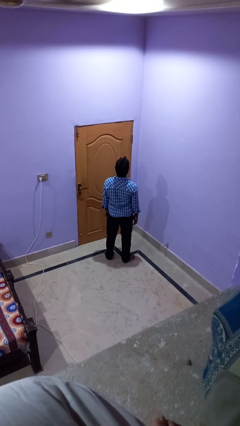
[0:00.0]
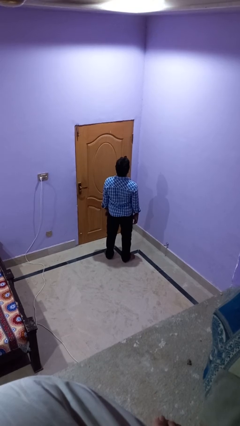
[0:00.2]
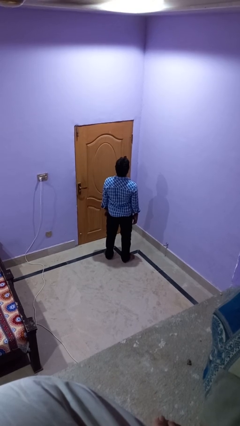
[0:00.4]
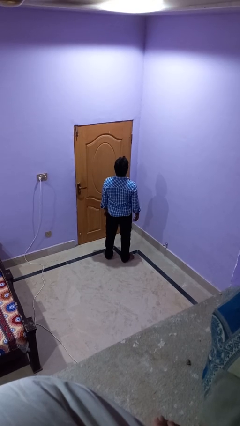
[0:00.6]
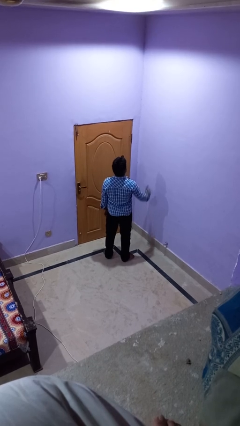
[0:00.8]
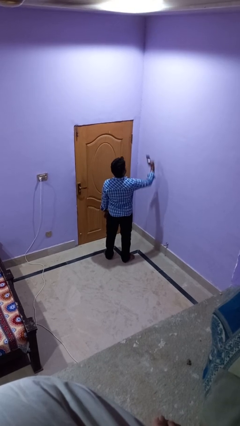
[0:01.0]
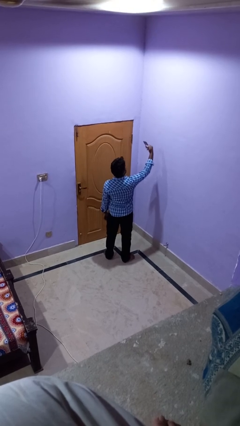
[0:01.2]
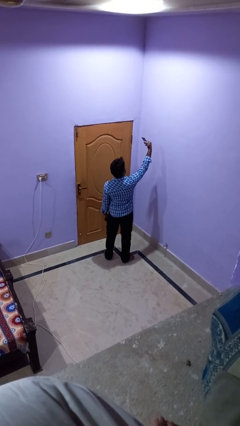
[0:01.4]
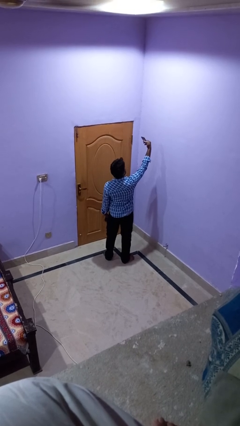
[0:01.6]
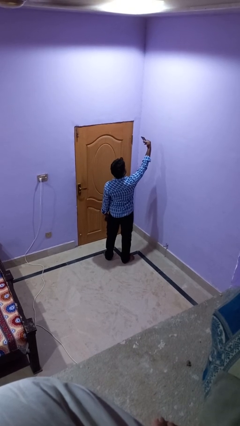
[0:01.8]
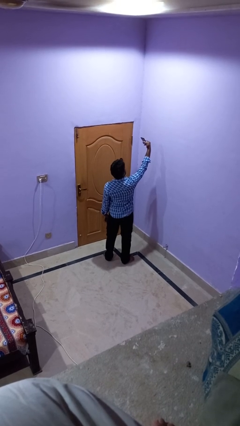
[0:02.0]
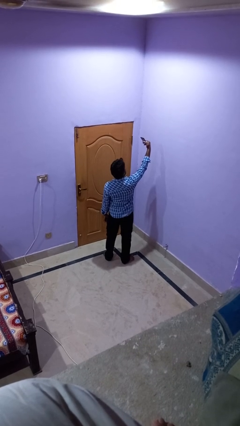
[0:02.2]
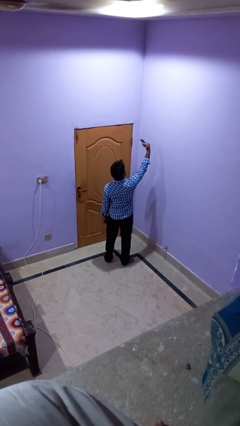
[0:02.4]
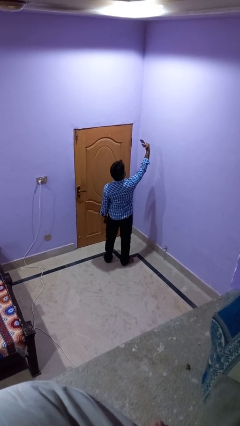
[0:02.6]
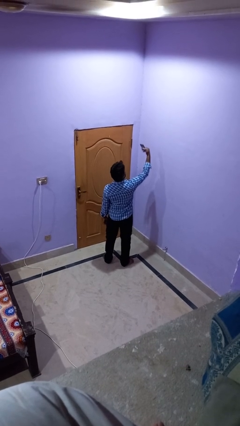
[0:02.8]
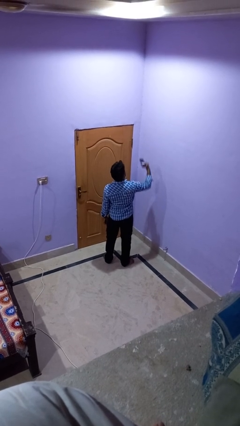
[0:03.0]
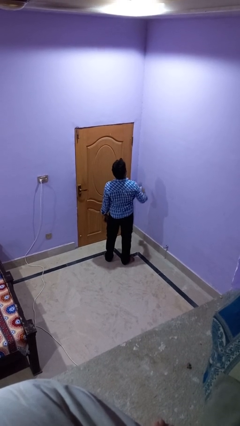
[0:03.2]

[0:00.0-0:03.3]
person takes selfie

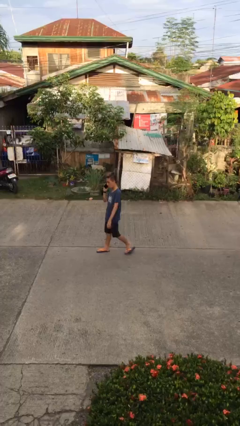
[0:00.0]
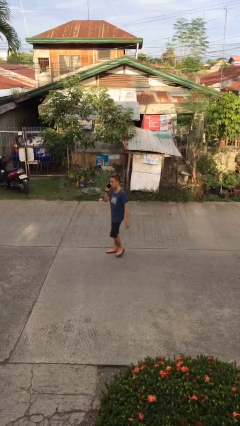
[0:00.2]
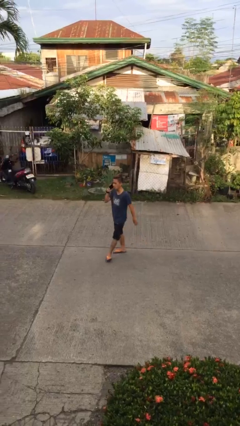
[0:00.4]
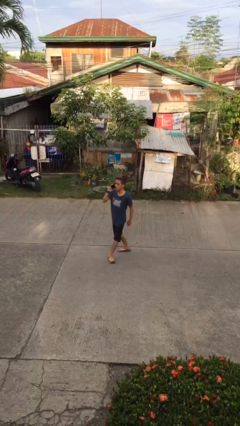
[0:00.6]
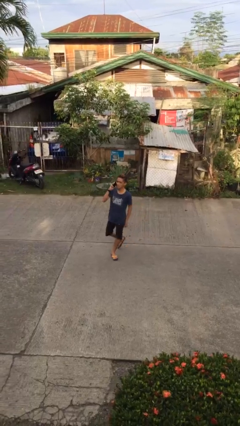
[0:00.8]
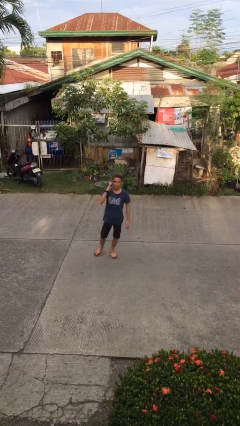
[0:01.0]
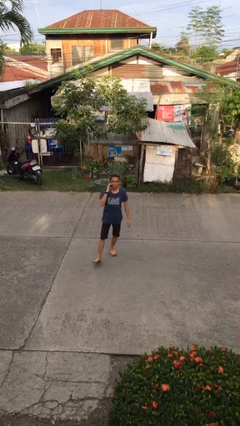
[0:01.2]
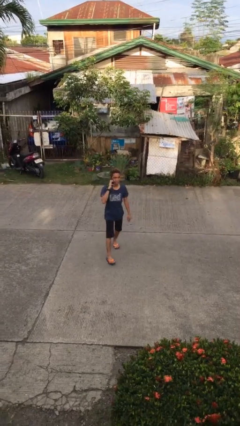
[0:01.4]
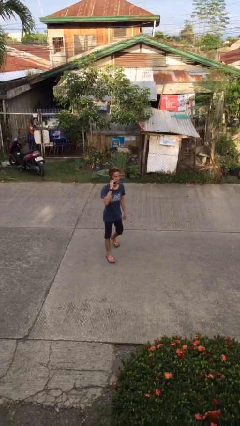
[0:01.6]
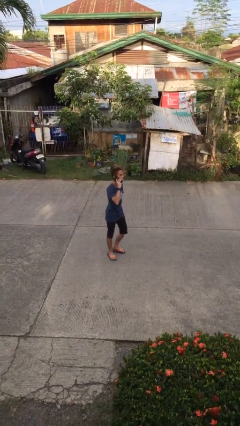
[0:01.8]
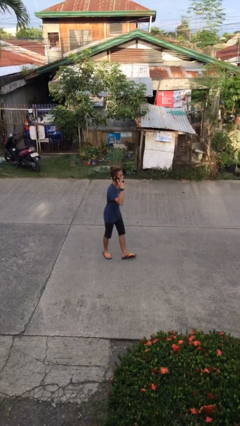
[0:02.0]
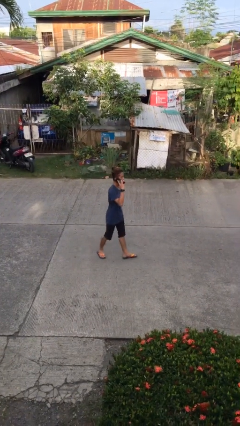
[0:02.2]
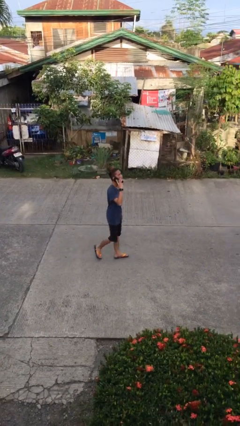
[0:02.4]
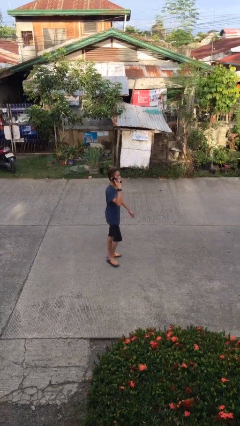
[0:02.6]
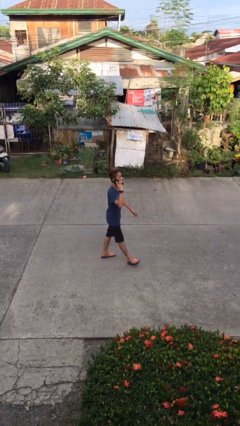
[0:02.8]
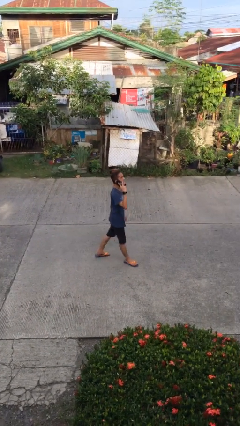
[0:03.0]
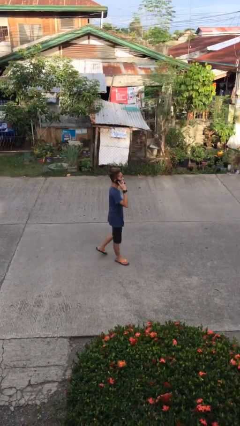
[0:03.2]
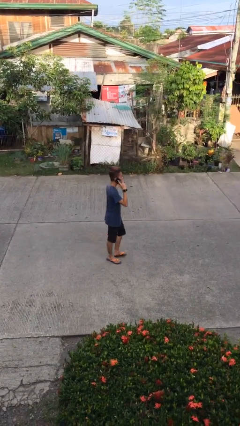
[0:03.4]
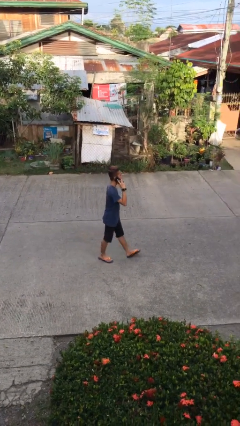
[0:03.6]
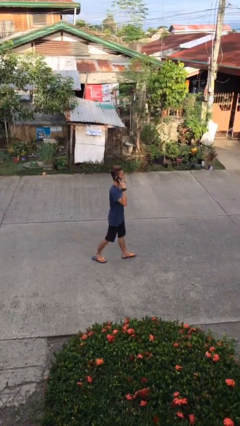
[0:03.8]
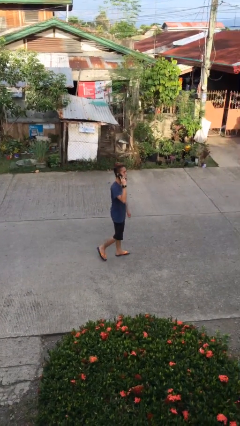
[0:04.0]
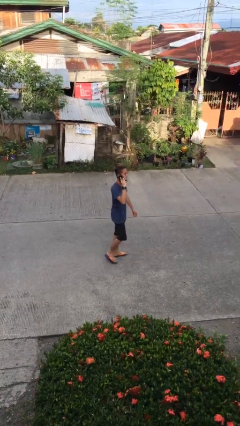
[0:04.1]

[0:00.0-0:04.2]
person talks on phone

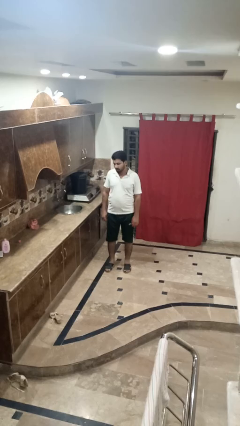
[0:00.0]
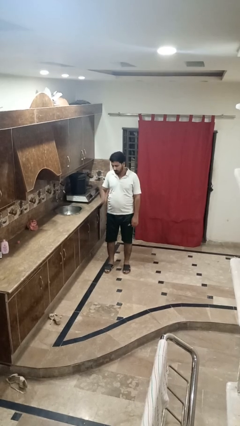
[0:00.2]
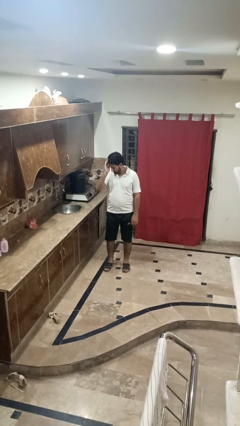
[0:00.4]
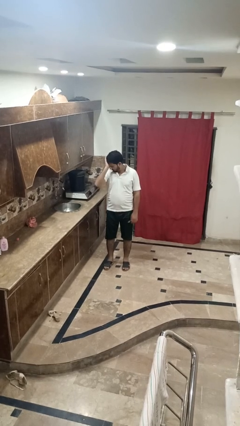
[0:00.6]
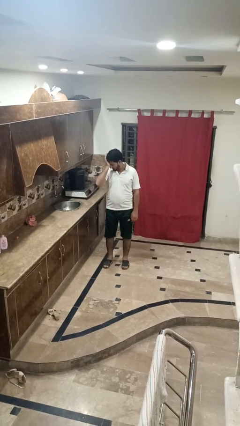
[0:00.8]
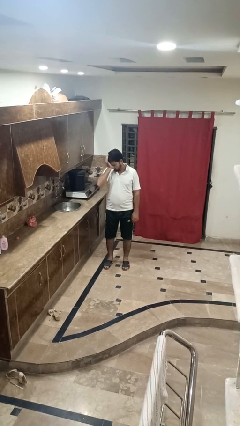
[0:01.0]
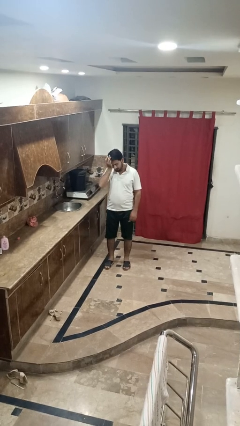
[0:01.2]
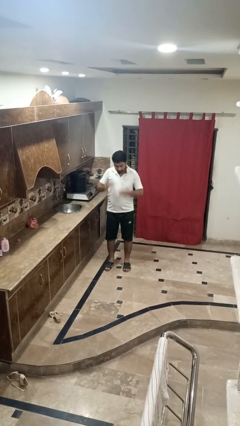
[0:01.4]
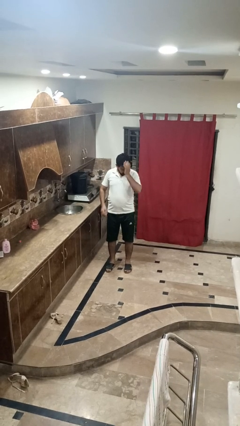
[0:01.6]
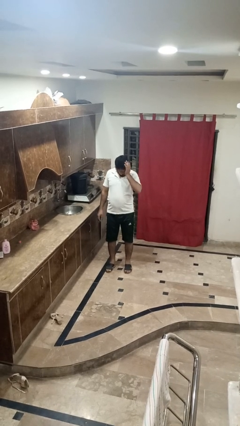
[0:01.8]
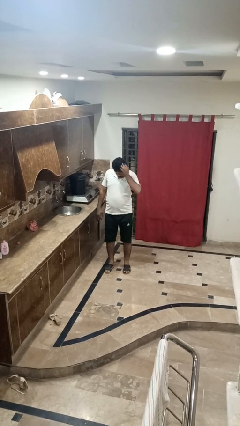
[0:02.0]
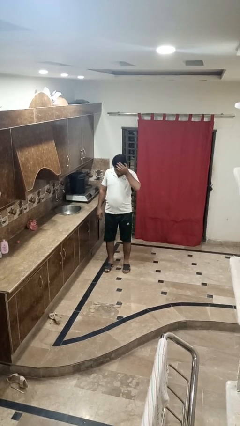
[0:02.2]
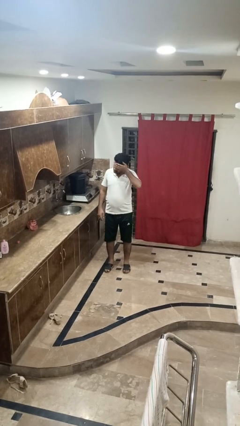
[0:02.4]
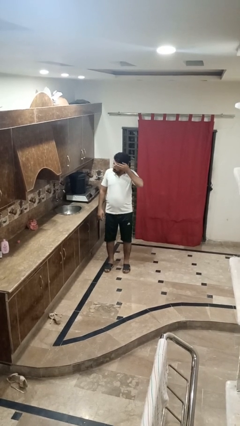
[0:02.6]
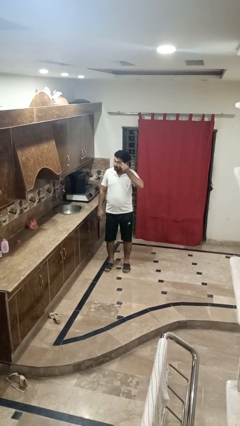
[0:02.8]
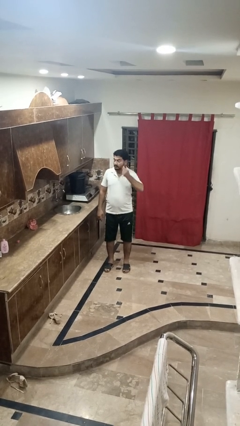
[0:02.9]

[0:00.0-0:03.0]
person rubs eyes

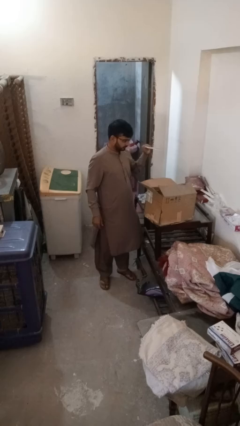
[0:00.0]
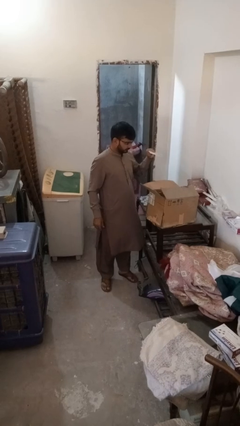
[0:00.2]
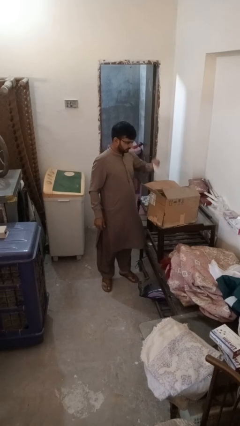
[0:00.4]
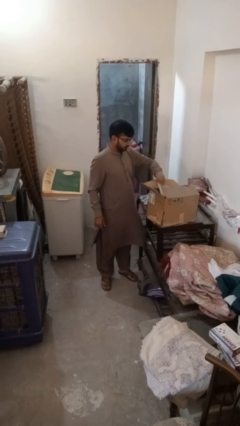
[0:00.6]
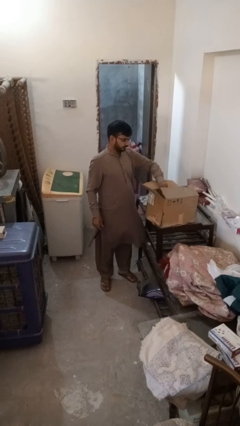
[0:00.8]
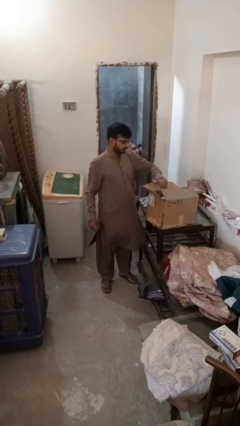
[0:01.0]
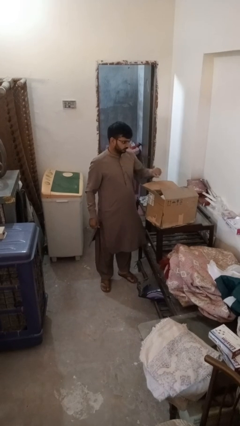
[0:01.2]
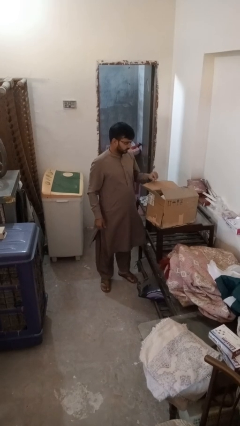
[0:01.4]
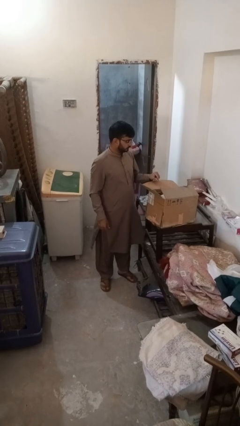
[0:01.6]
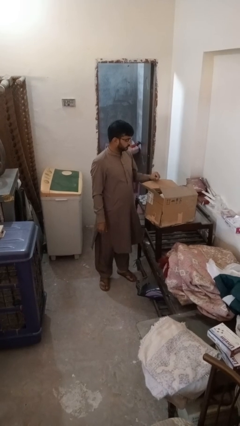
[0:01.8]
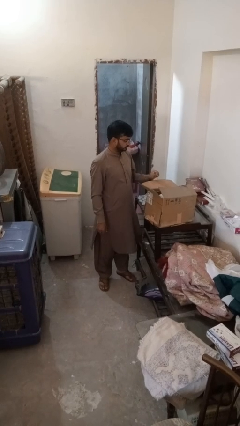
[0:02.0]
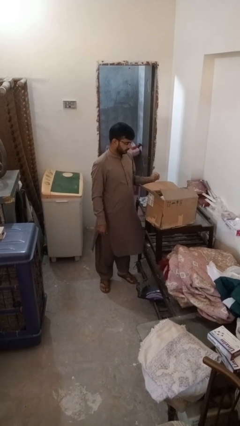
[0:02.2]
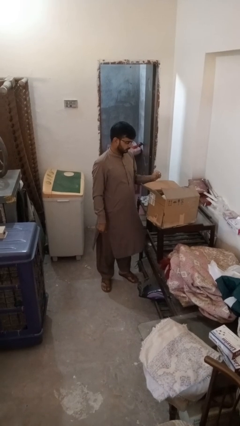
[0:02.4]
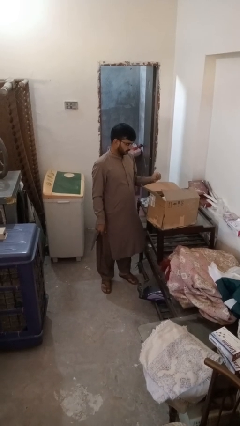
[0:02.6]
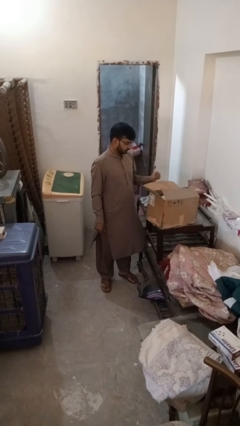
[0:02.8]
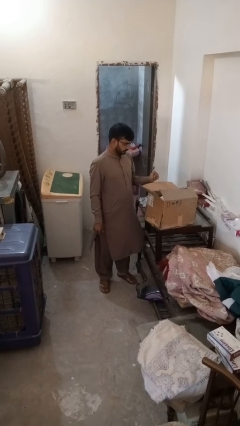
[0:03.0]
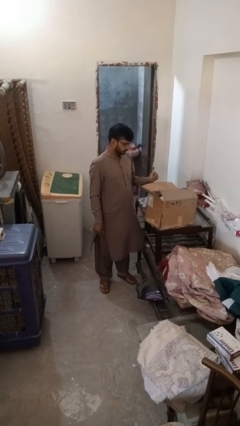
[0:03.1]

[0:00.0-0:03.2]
person puts object into box

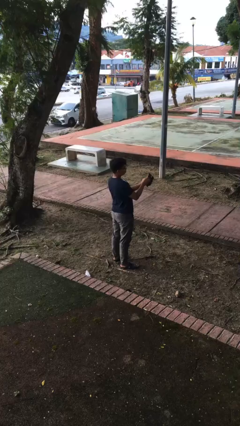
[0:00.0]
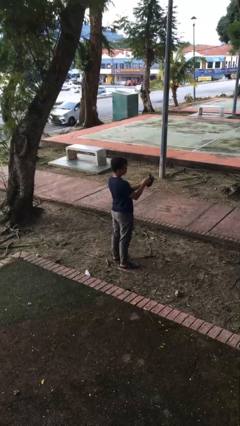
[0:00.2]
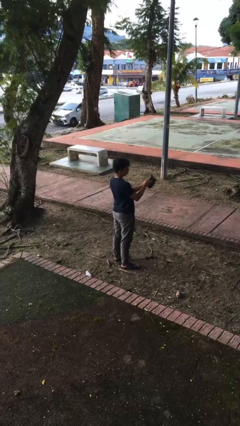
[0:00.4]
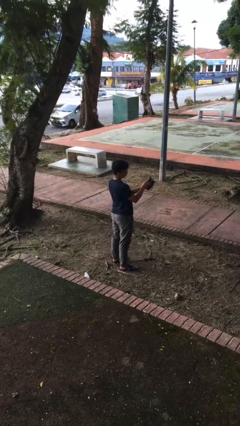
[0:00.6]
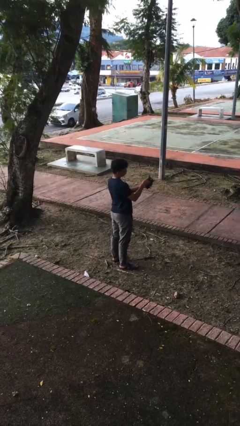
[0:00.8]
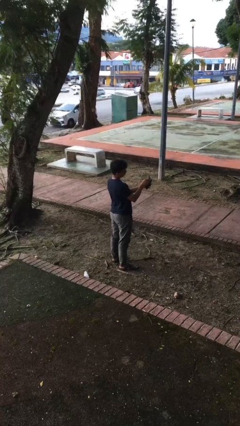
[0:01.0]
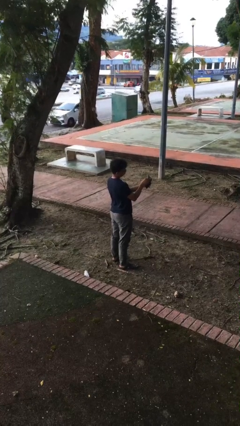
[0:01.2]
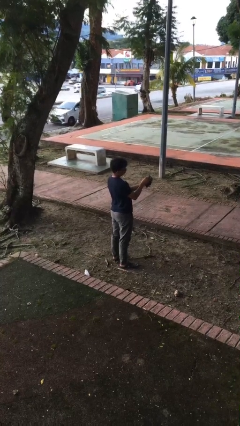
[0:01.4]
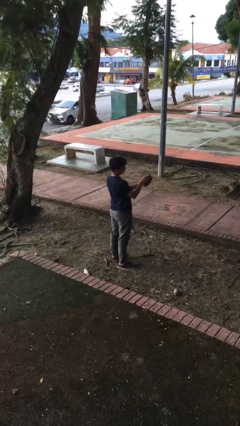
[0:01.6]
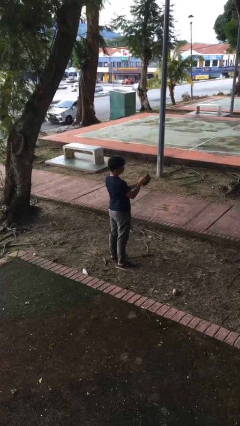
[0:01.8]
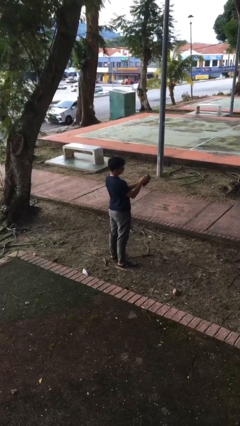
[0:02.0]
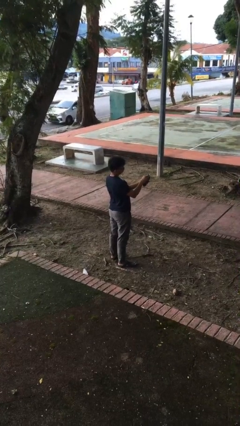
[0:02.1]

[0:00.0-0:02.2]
person searches in purse

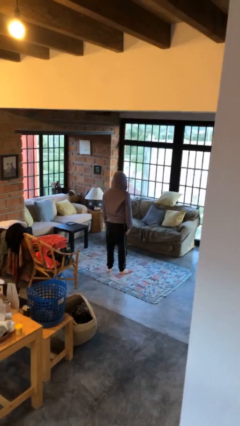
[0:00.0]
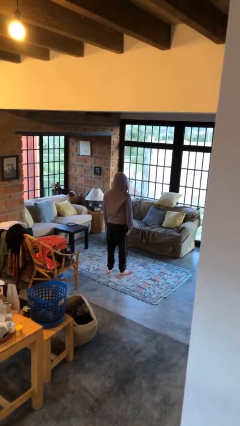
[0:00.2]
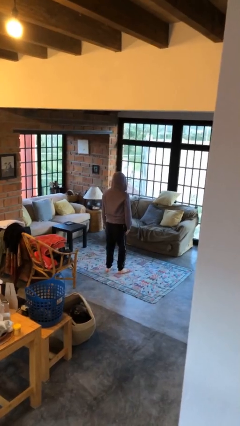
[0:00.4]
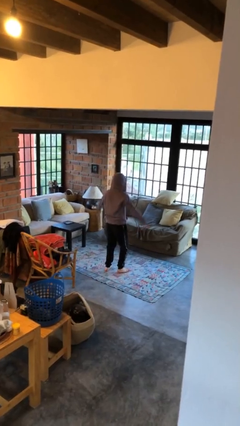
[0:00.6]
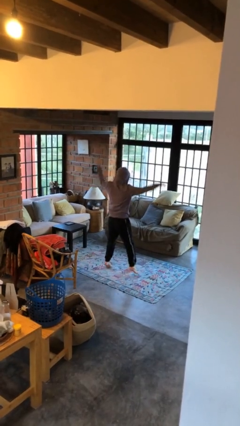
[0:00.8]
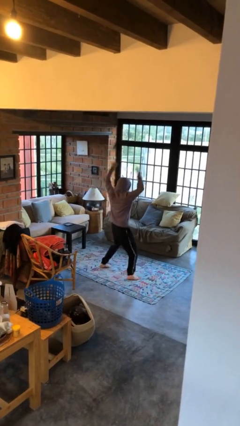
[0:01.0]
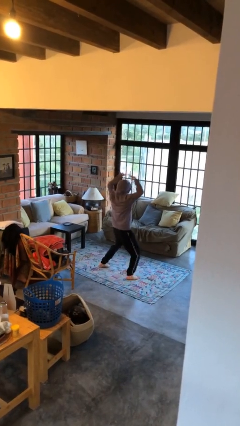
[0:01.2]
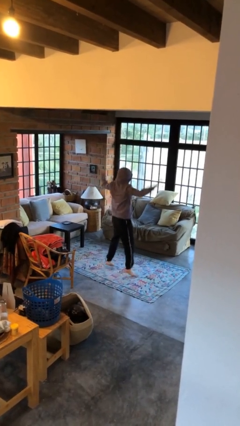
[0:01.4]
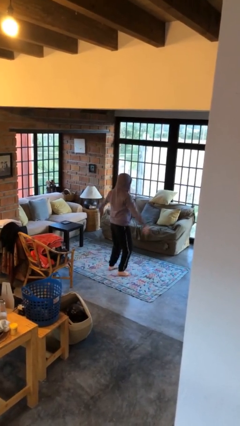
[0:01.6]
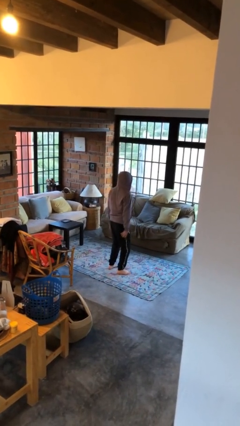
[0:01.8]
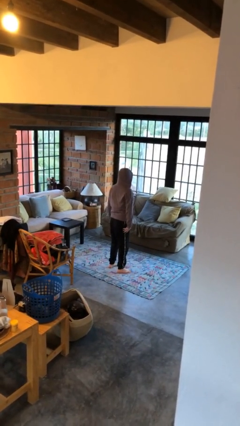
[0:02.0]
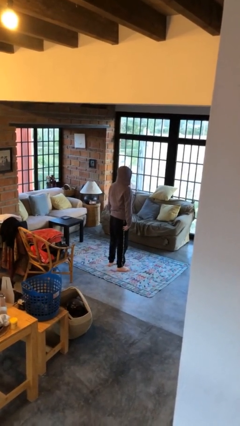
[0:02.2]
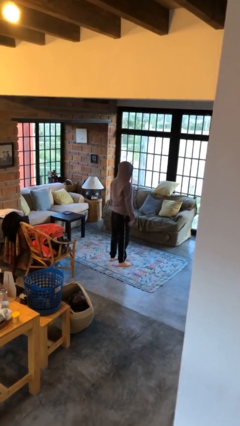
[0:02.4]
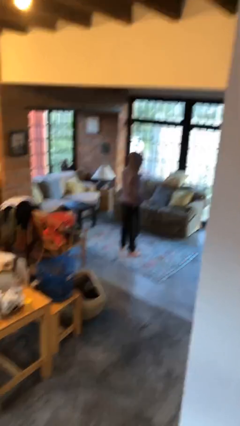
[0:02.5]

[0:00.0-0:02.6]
person exercises with jumping jacks
